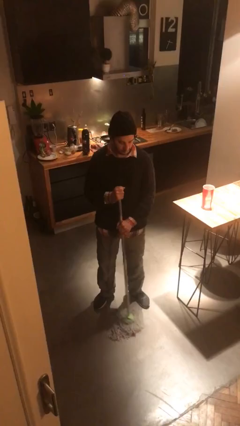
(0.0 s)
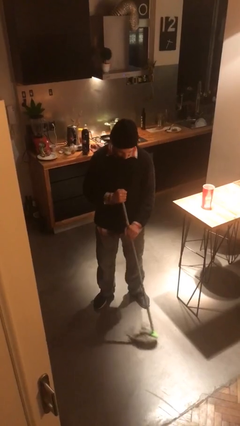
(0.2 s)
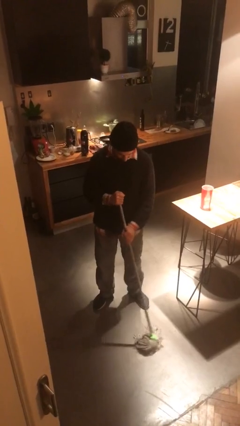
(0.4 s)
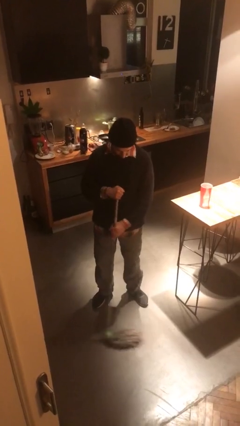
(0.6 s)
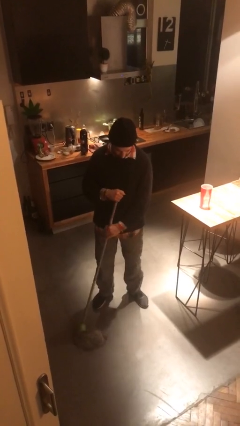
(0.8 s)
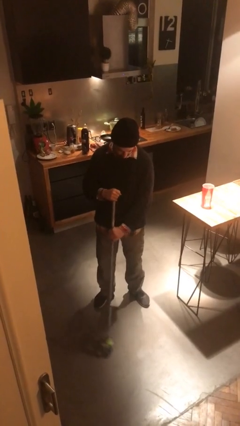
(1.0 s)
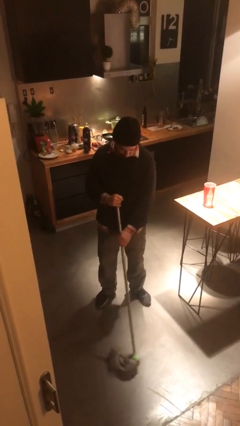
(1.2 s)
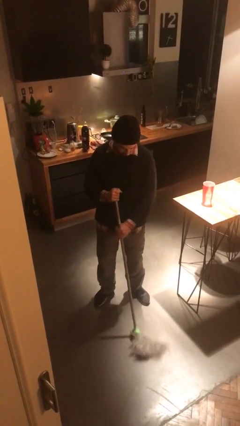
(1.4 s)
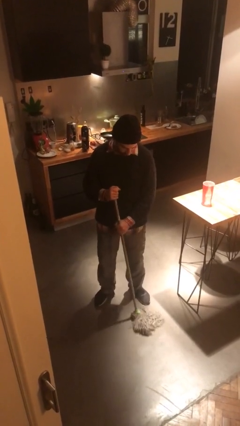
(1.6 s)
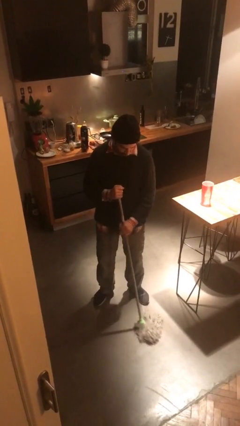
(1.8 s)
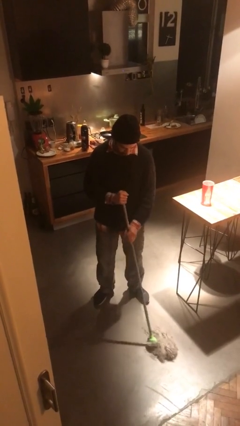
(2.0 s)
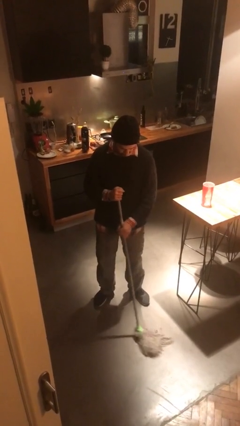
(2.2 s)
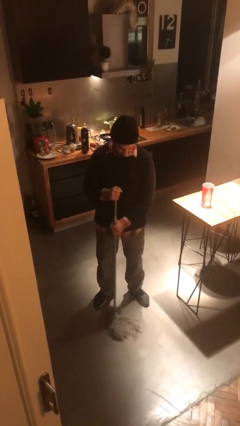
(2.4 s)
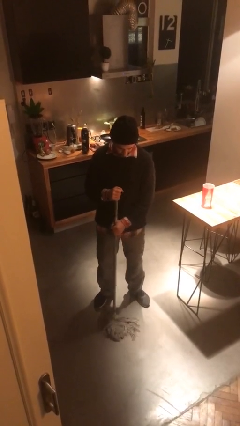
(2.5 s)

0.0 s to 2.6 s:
person mops

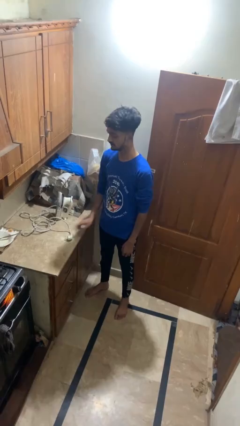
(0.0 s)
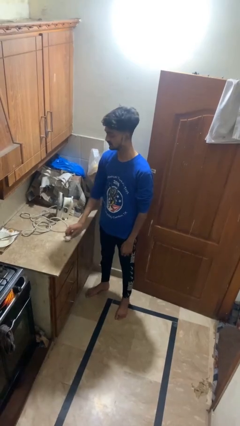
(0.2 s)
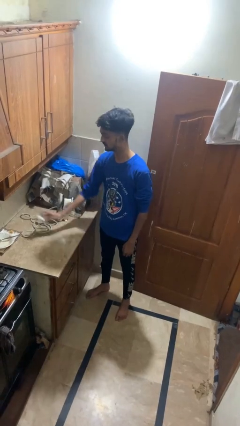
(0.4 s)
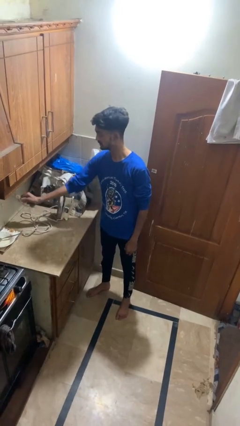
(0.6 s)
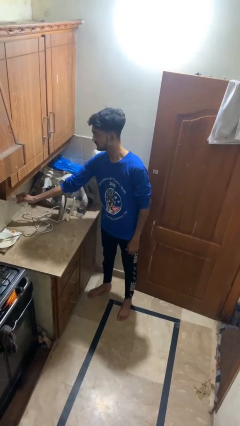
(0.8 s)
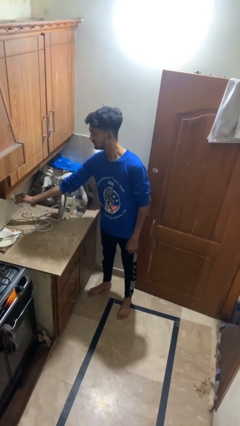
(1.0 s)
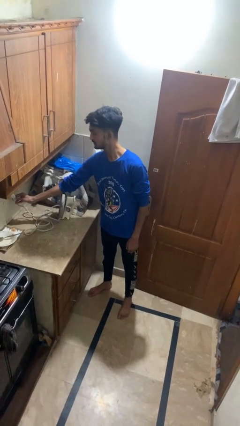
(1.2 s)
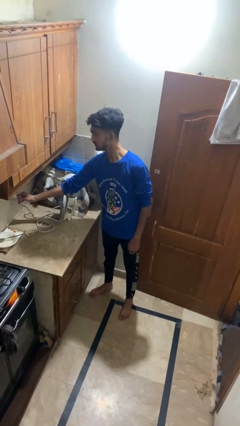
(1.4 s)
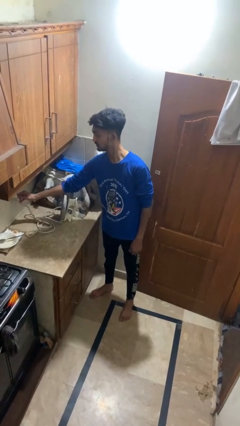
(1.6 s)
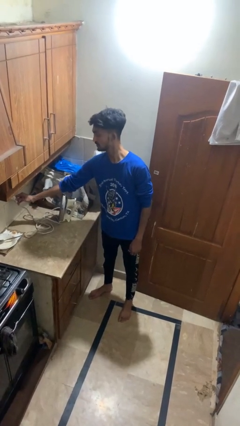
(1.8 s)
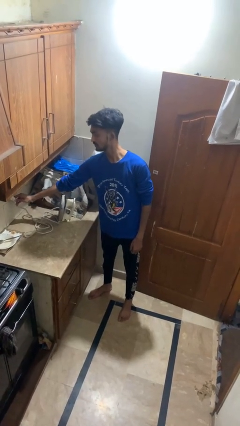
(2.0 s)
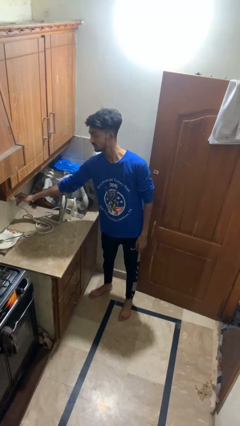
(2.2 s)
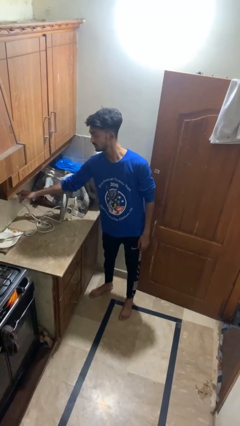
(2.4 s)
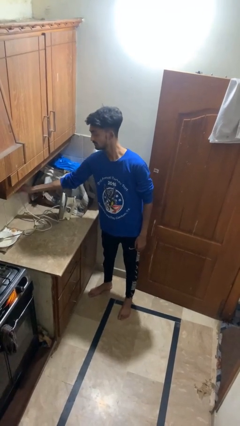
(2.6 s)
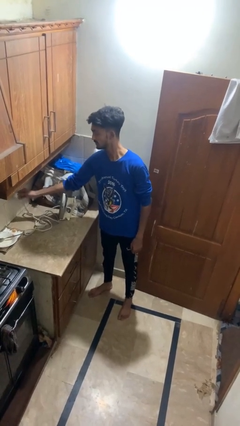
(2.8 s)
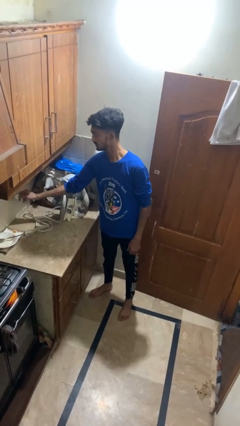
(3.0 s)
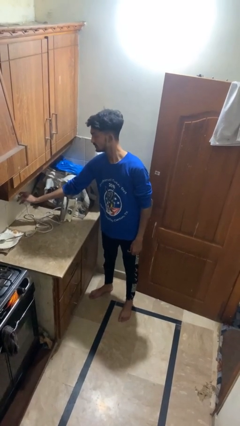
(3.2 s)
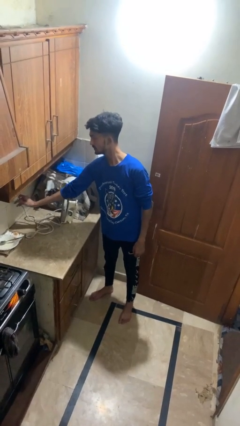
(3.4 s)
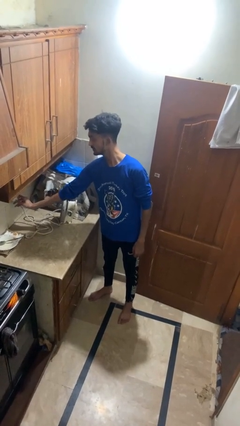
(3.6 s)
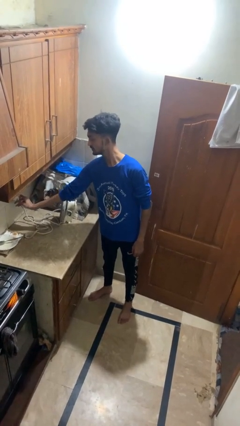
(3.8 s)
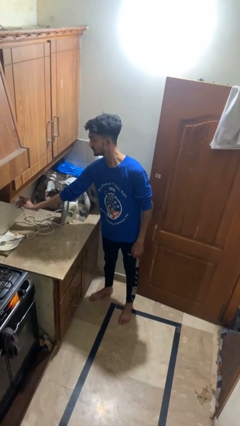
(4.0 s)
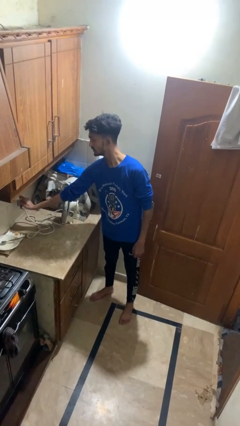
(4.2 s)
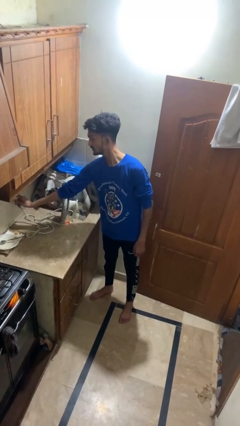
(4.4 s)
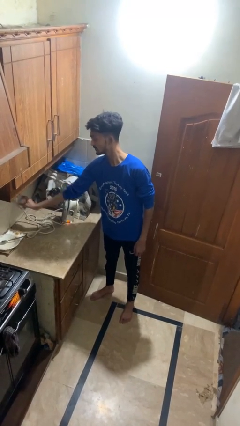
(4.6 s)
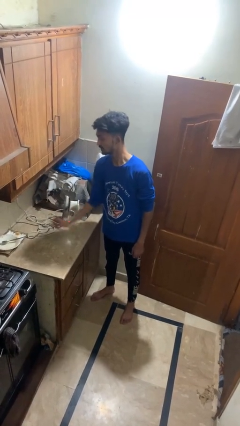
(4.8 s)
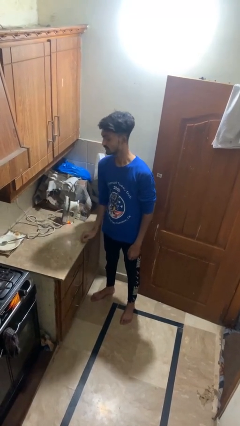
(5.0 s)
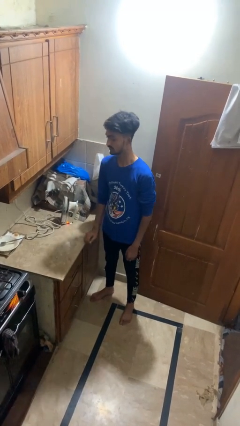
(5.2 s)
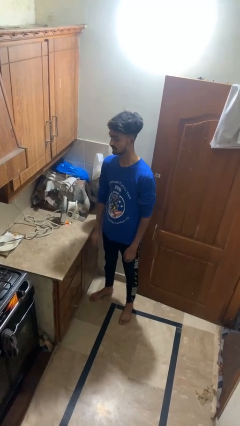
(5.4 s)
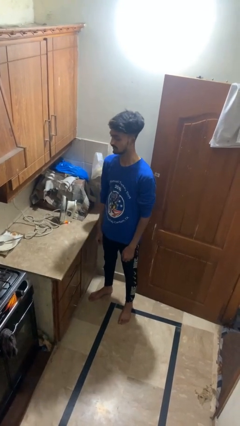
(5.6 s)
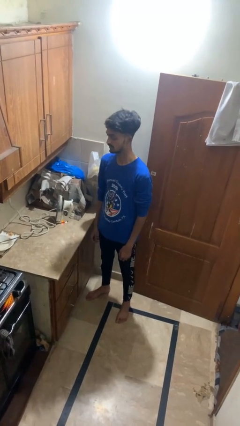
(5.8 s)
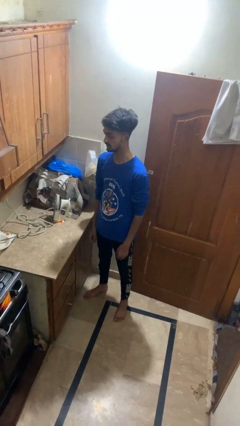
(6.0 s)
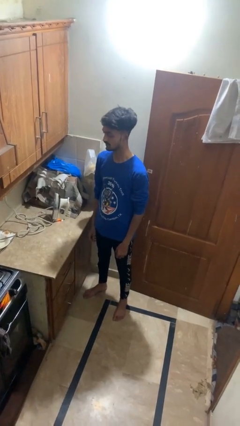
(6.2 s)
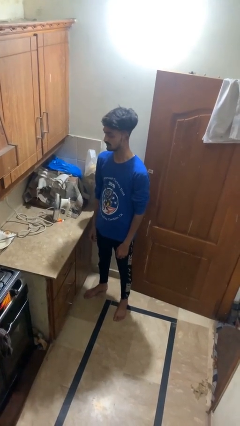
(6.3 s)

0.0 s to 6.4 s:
person plugs into electrical socket

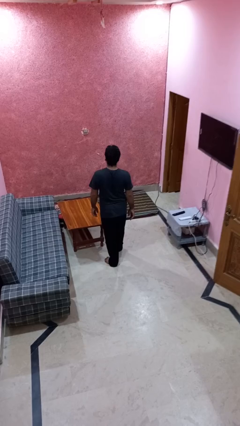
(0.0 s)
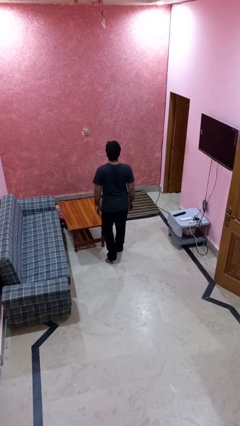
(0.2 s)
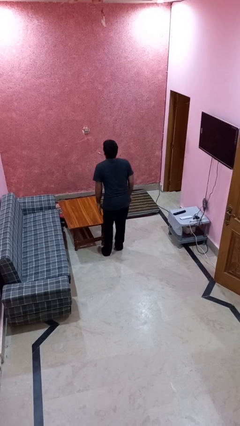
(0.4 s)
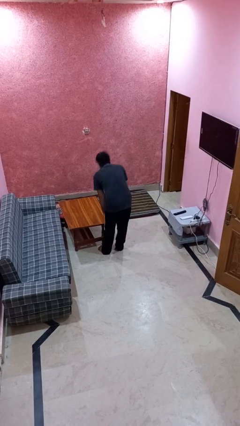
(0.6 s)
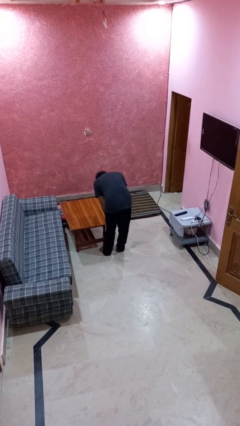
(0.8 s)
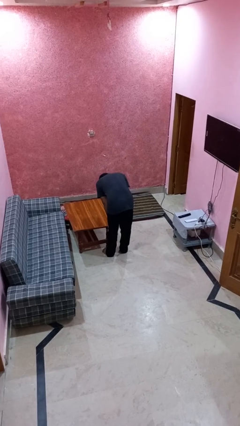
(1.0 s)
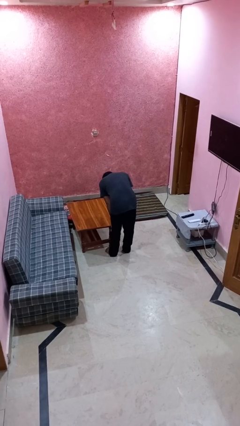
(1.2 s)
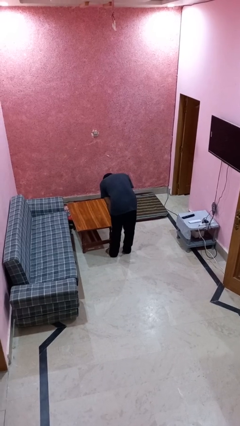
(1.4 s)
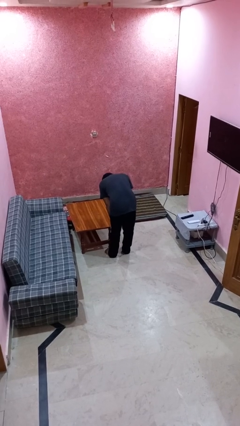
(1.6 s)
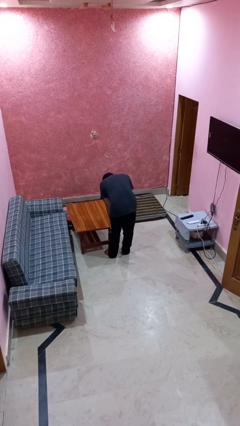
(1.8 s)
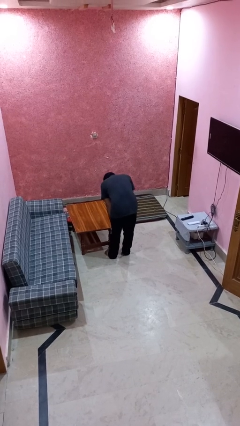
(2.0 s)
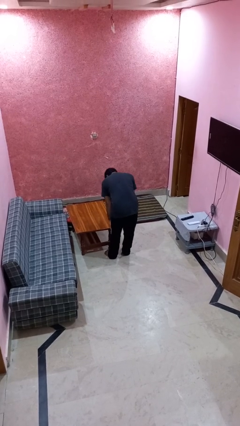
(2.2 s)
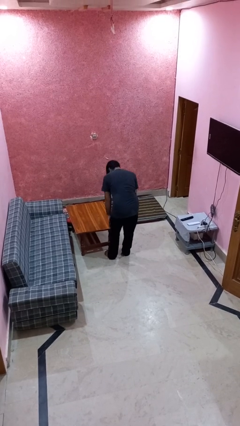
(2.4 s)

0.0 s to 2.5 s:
person bumps into table

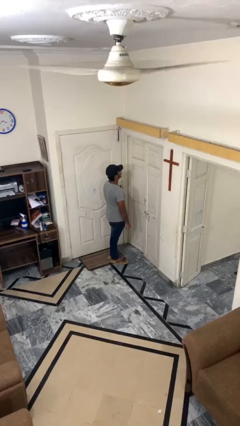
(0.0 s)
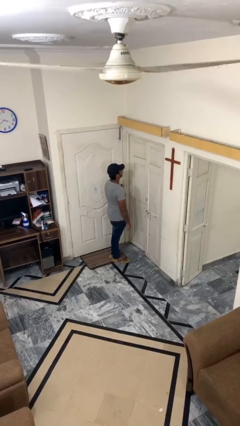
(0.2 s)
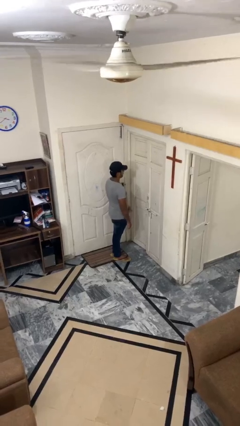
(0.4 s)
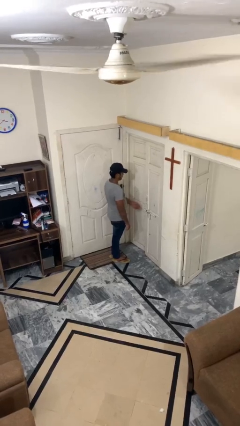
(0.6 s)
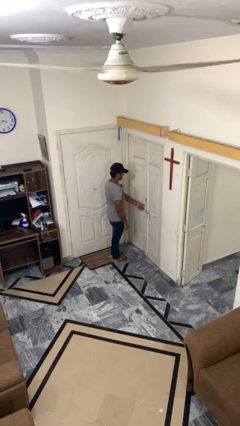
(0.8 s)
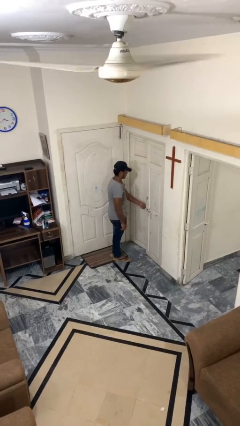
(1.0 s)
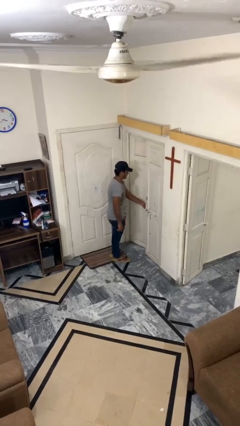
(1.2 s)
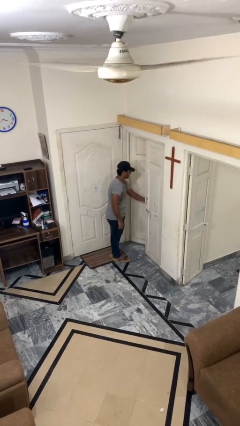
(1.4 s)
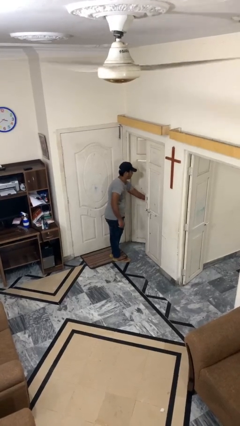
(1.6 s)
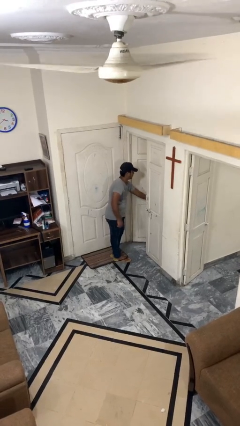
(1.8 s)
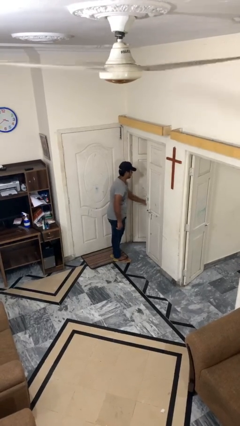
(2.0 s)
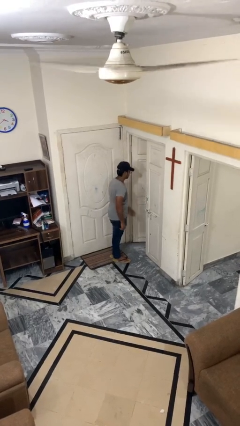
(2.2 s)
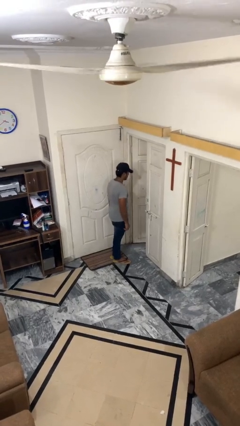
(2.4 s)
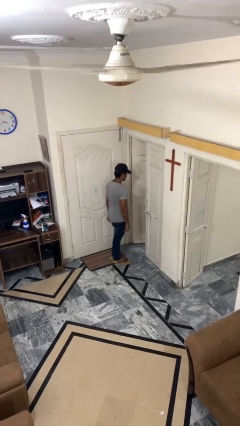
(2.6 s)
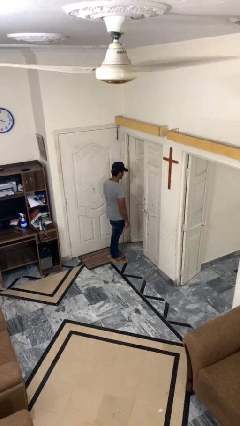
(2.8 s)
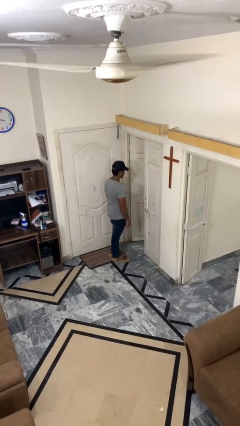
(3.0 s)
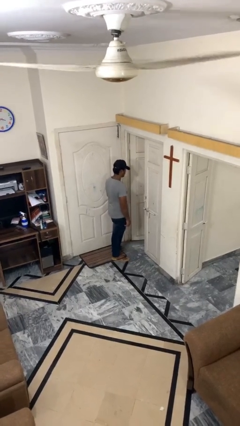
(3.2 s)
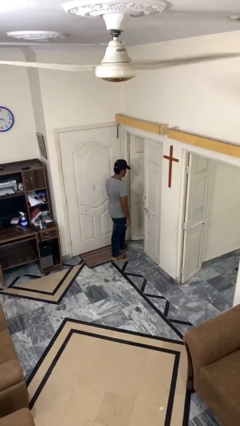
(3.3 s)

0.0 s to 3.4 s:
person opens facility door

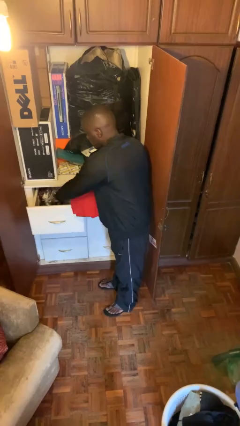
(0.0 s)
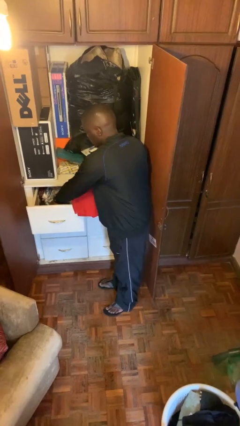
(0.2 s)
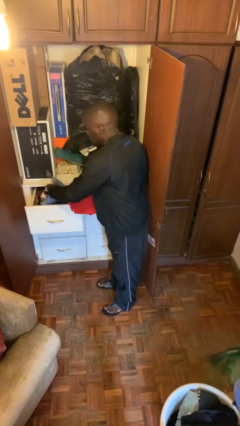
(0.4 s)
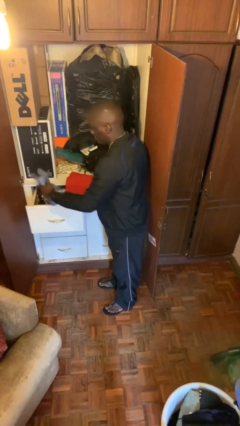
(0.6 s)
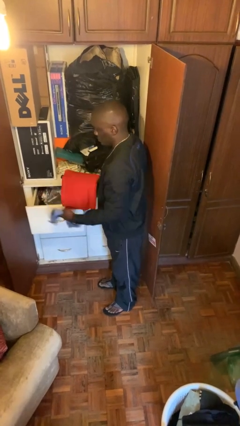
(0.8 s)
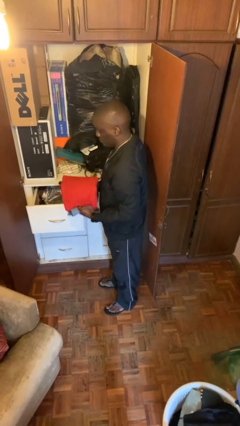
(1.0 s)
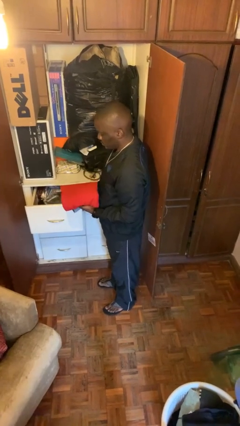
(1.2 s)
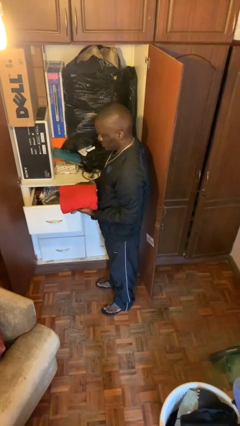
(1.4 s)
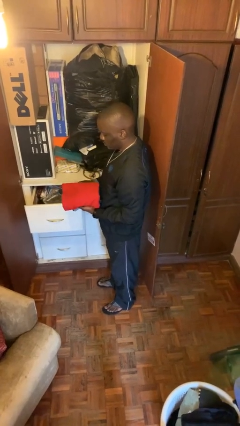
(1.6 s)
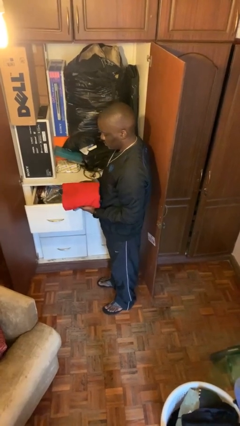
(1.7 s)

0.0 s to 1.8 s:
person takes clothes from dresser

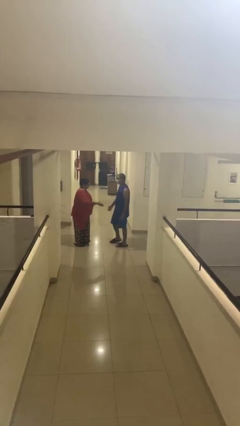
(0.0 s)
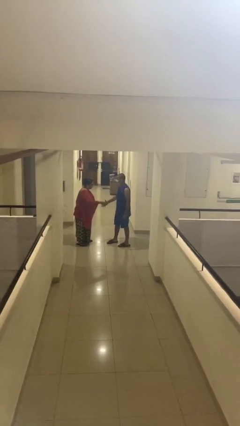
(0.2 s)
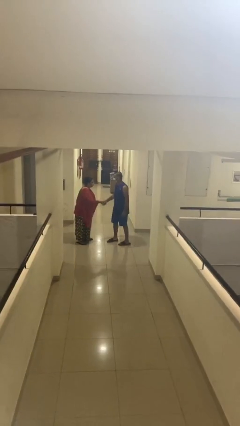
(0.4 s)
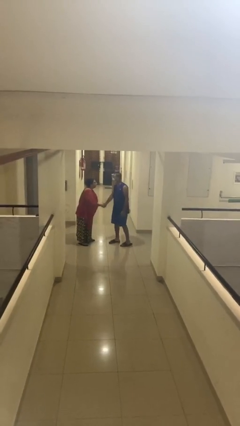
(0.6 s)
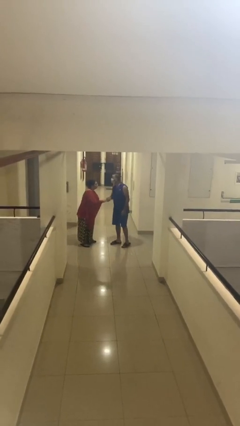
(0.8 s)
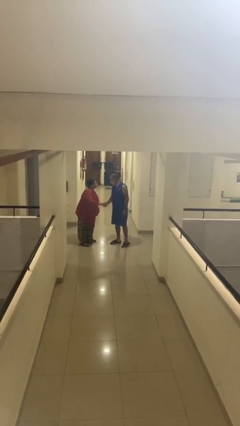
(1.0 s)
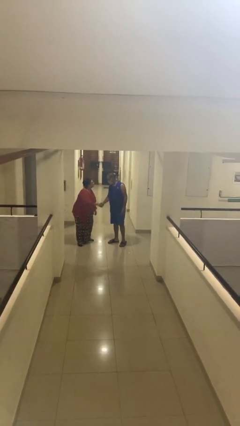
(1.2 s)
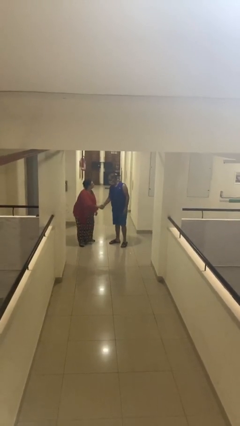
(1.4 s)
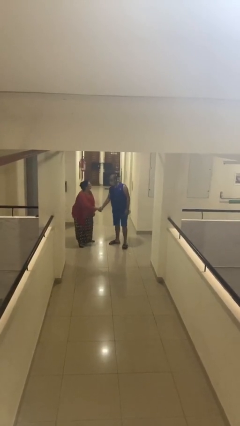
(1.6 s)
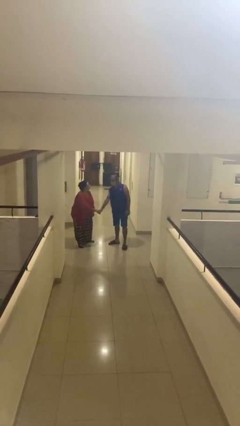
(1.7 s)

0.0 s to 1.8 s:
person shakes hand
